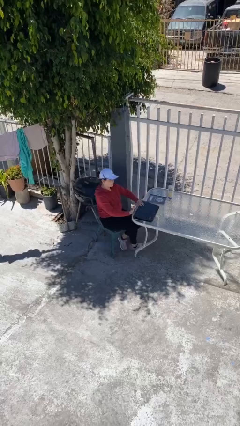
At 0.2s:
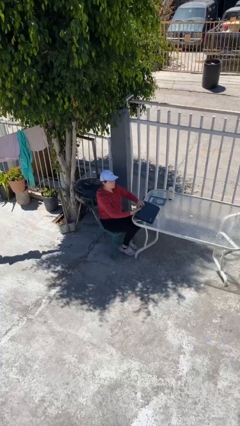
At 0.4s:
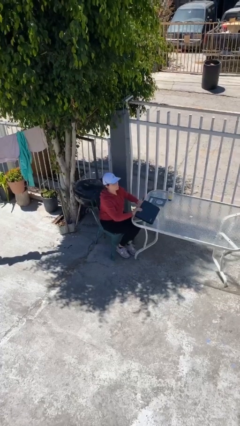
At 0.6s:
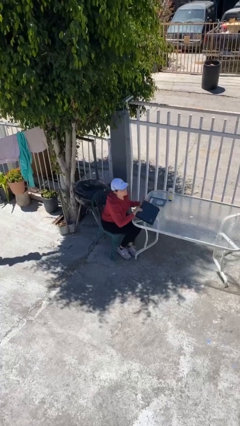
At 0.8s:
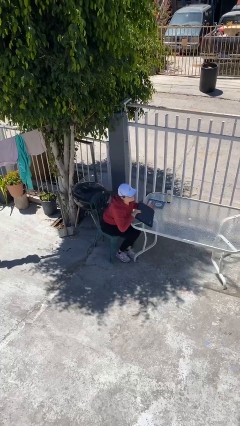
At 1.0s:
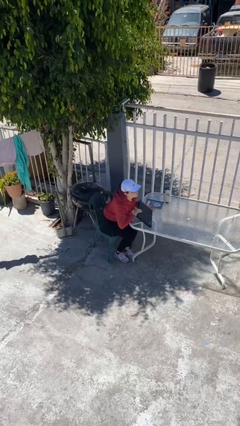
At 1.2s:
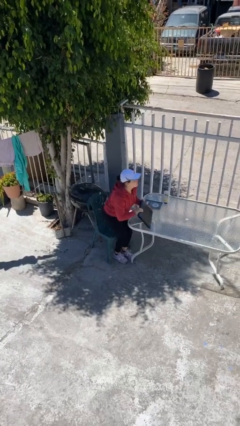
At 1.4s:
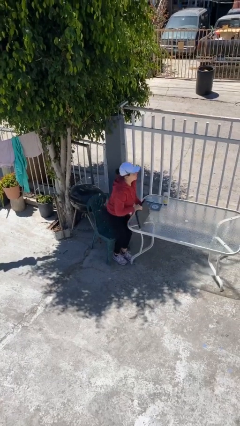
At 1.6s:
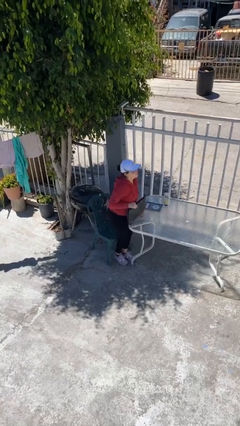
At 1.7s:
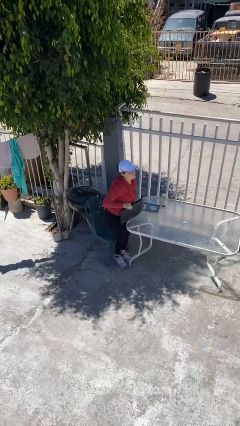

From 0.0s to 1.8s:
person stands up

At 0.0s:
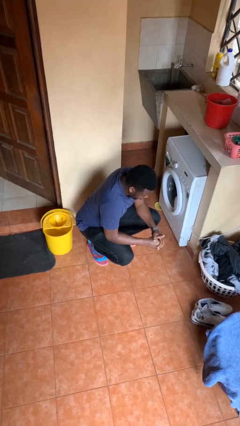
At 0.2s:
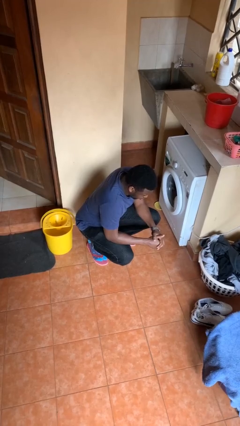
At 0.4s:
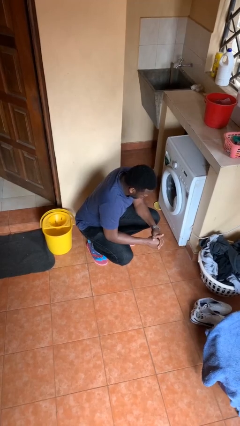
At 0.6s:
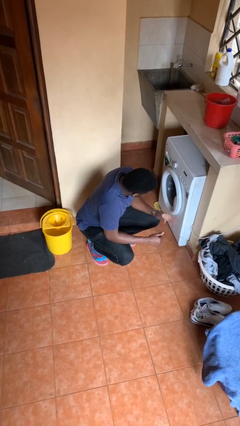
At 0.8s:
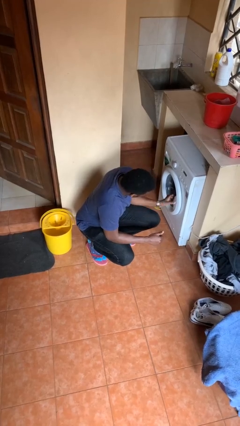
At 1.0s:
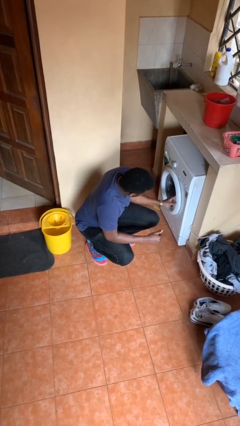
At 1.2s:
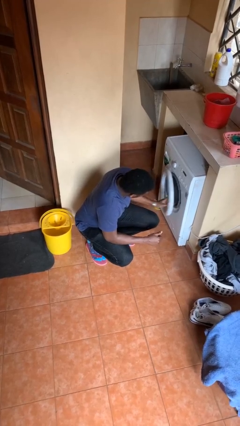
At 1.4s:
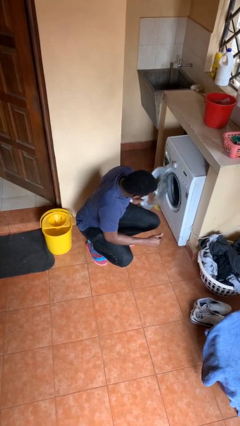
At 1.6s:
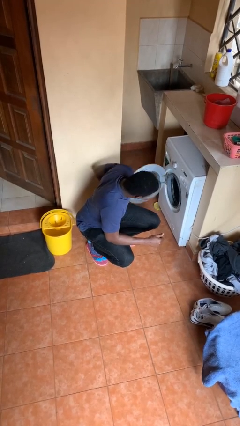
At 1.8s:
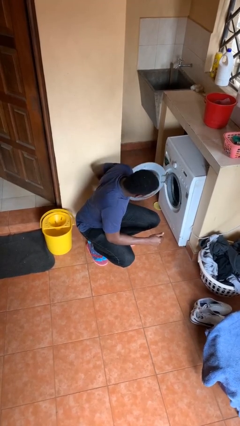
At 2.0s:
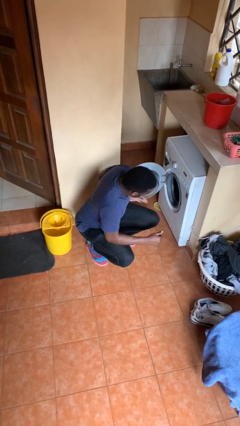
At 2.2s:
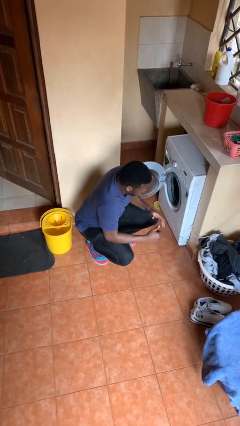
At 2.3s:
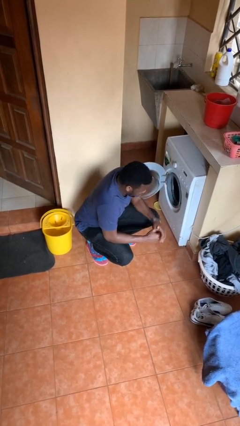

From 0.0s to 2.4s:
person opens clothes washer

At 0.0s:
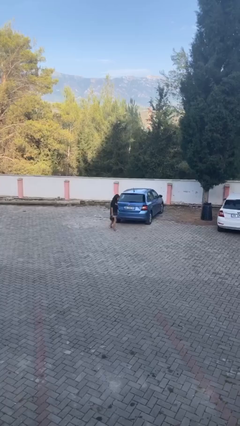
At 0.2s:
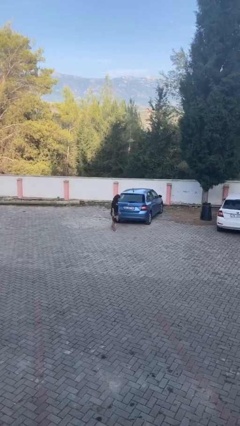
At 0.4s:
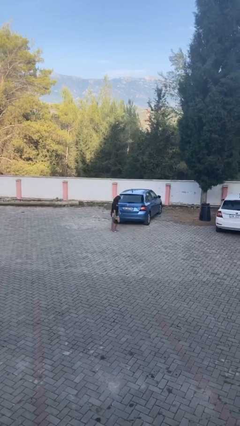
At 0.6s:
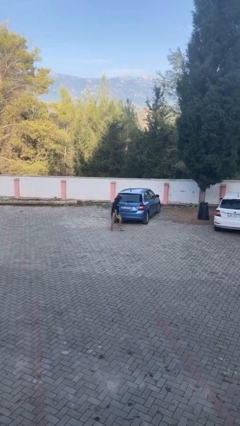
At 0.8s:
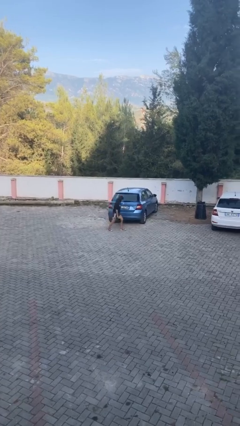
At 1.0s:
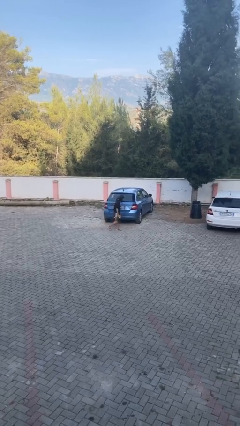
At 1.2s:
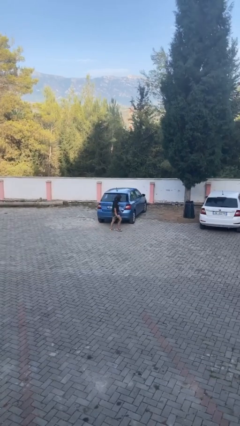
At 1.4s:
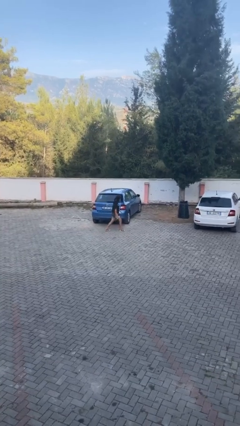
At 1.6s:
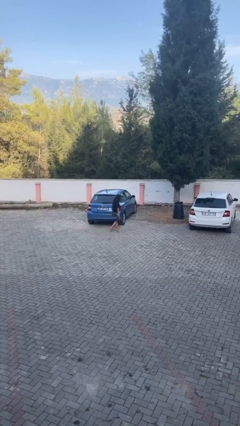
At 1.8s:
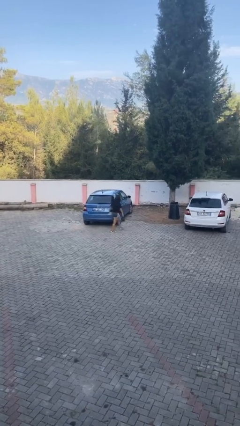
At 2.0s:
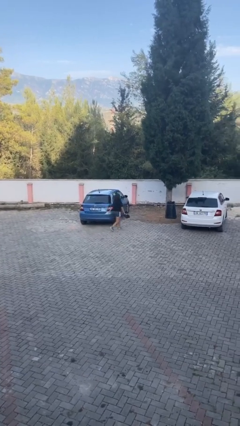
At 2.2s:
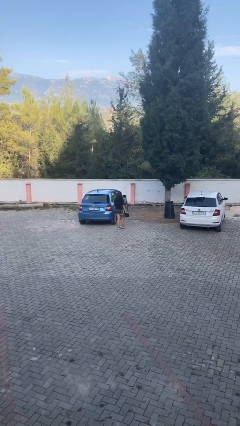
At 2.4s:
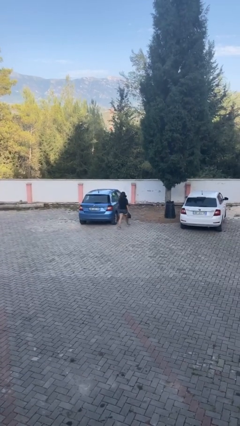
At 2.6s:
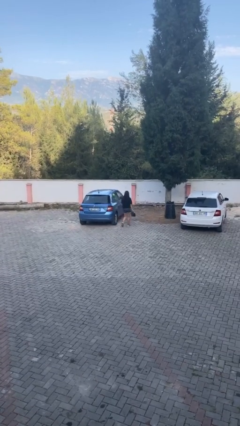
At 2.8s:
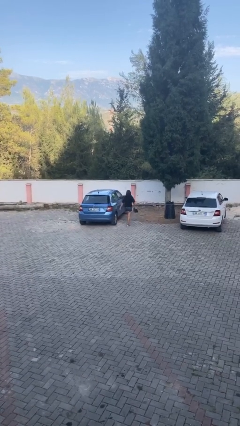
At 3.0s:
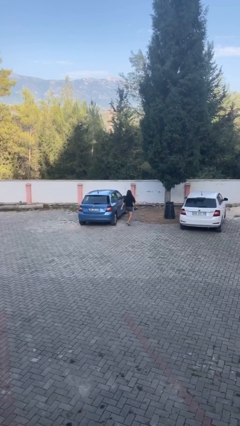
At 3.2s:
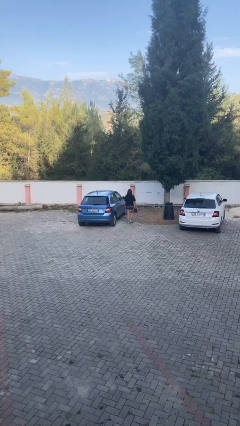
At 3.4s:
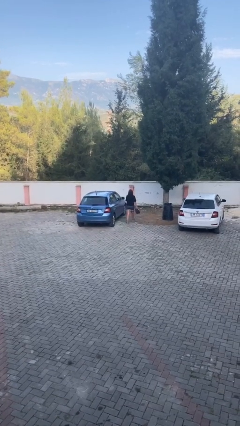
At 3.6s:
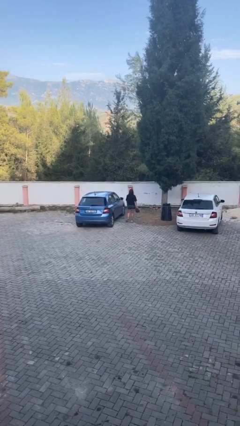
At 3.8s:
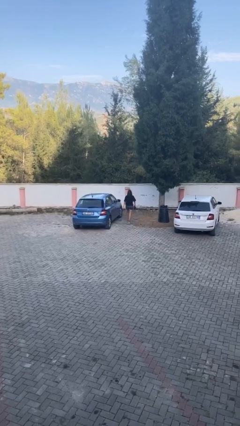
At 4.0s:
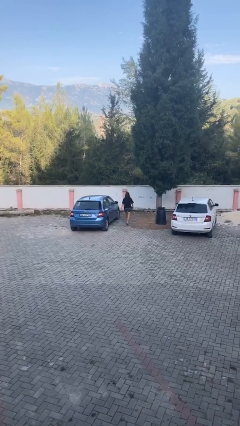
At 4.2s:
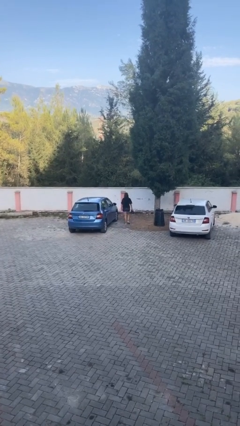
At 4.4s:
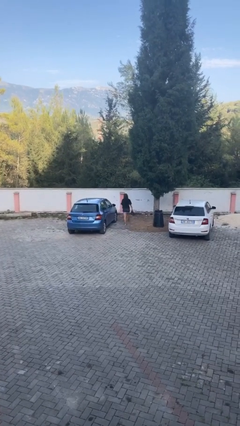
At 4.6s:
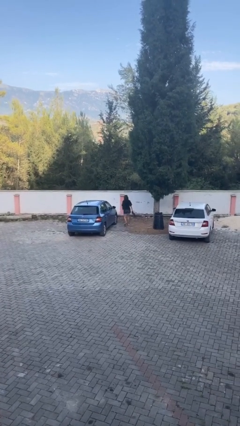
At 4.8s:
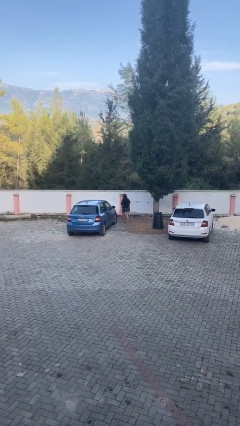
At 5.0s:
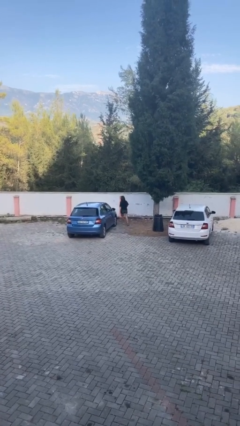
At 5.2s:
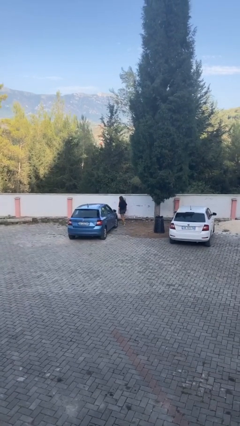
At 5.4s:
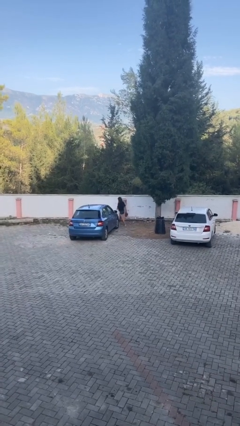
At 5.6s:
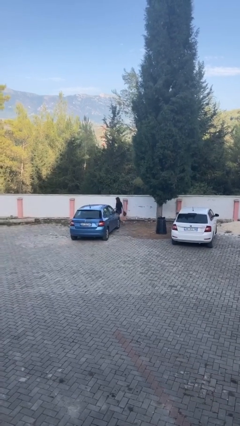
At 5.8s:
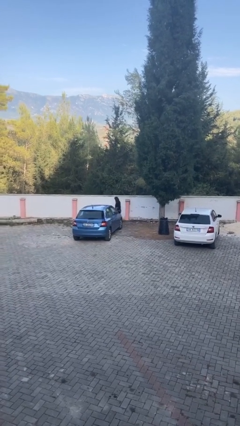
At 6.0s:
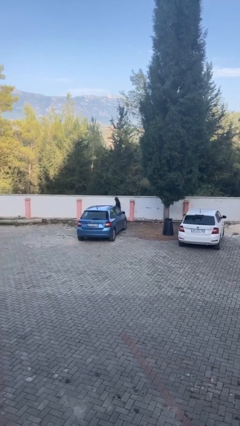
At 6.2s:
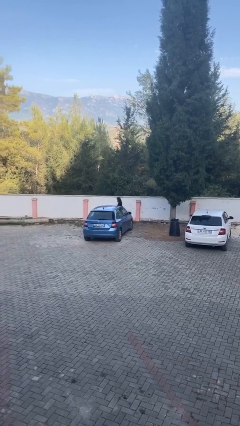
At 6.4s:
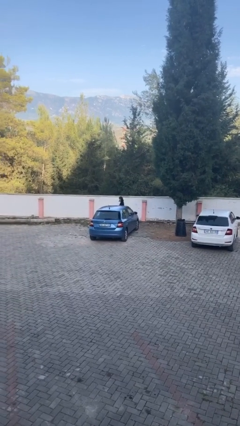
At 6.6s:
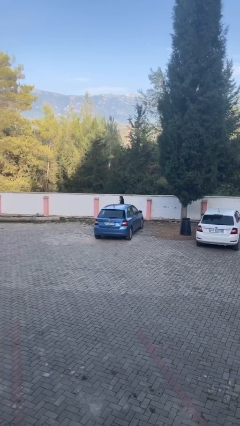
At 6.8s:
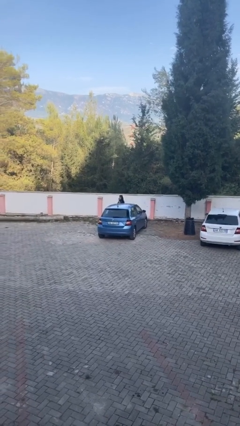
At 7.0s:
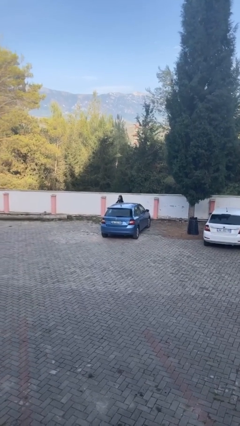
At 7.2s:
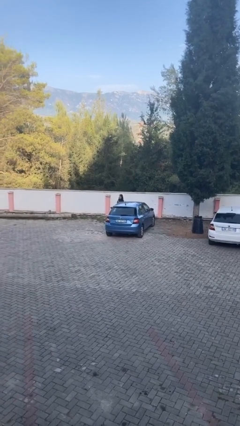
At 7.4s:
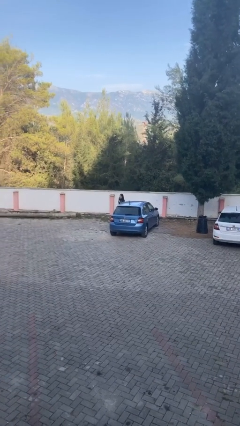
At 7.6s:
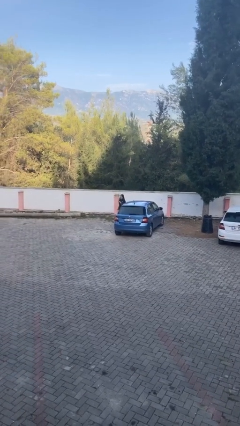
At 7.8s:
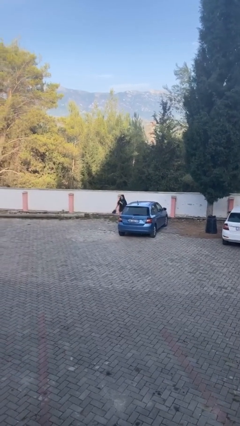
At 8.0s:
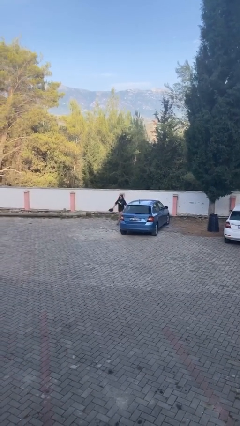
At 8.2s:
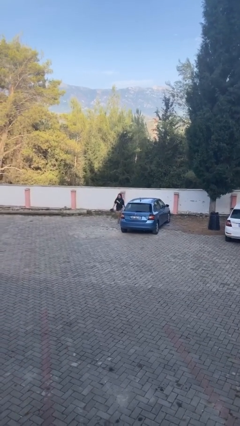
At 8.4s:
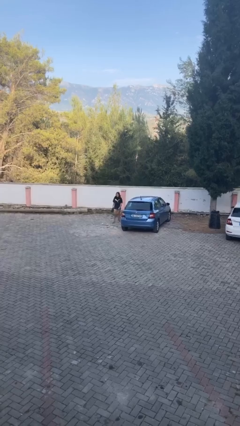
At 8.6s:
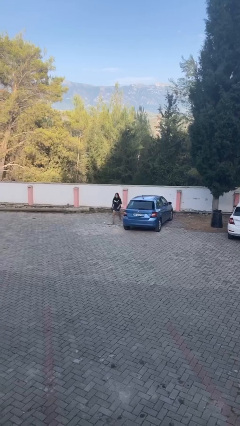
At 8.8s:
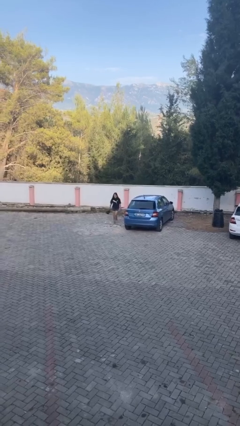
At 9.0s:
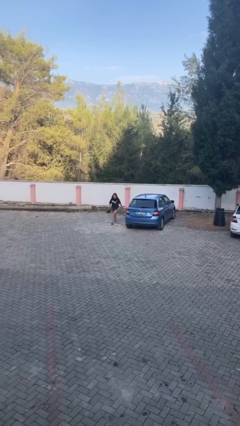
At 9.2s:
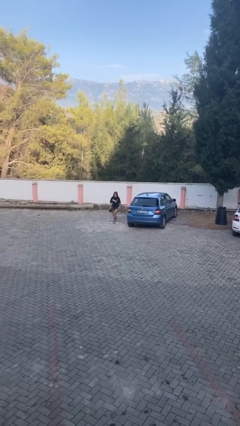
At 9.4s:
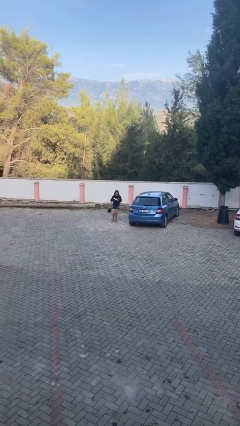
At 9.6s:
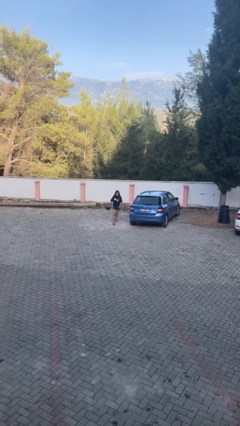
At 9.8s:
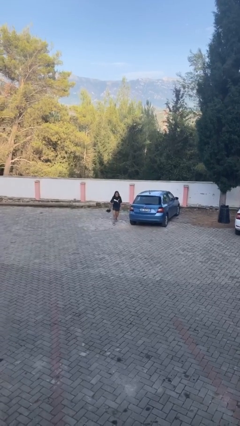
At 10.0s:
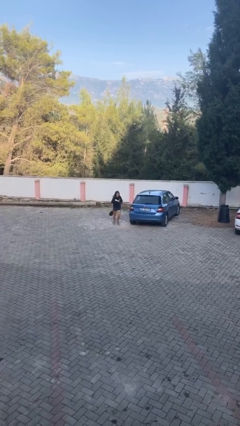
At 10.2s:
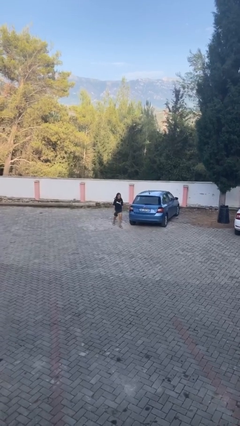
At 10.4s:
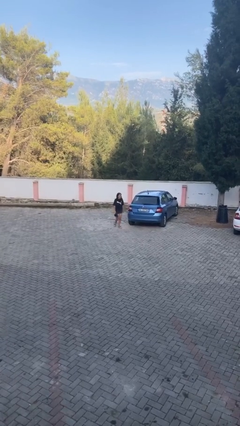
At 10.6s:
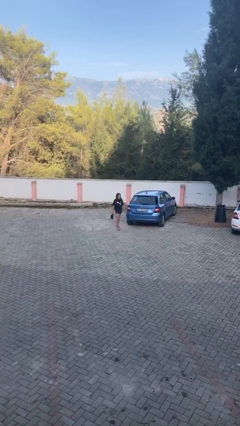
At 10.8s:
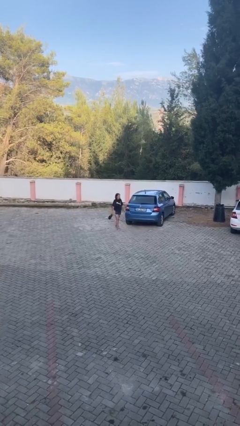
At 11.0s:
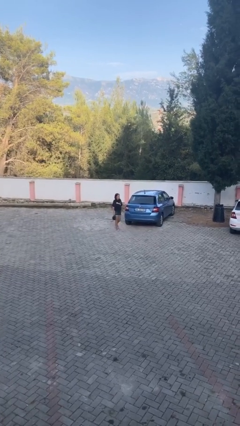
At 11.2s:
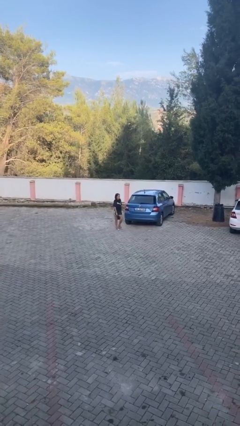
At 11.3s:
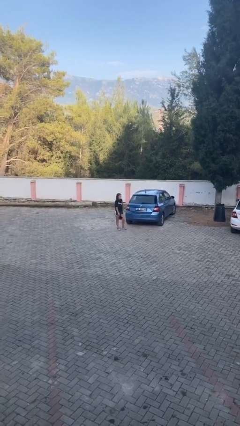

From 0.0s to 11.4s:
person walks around car

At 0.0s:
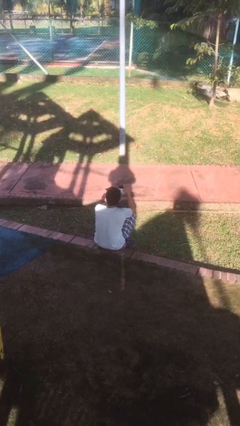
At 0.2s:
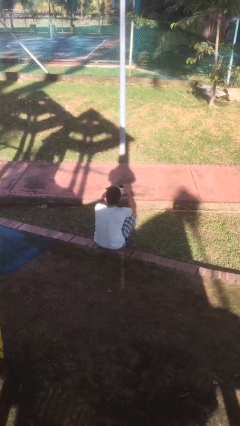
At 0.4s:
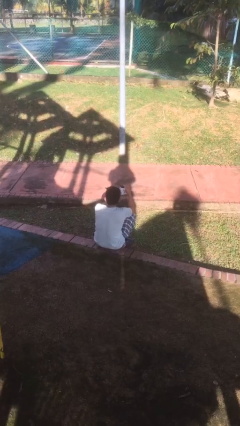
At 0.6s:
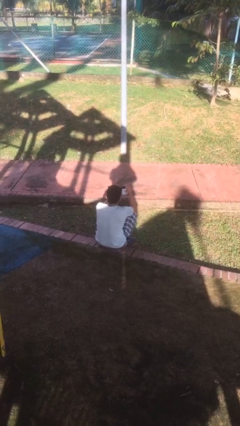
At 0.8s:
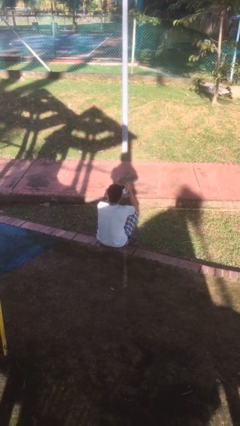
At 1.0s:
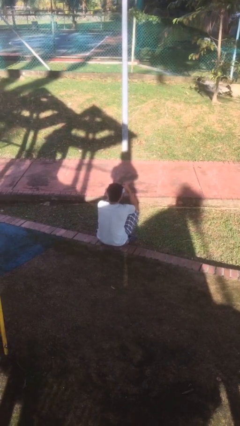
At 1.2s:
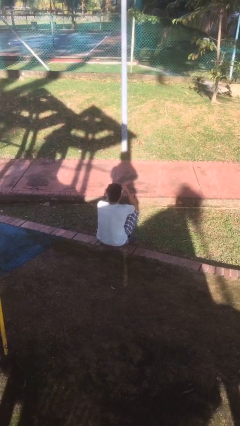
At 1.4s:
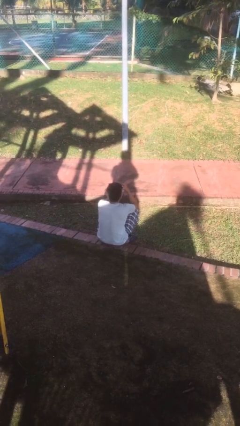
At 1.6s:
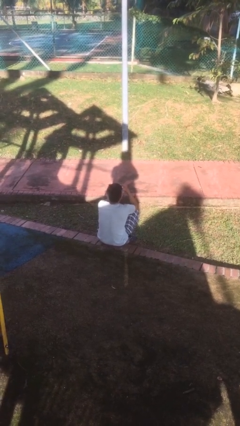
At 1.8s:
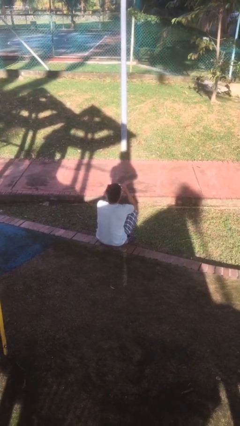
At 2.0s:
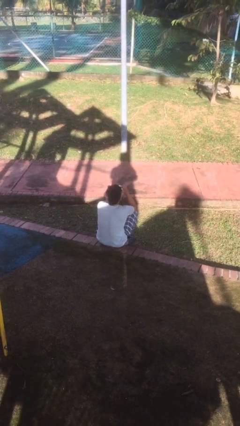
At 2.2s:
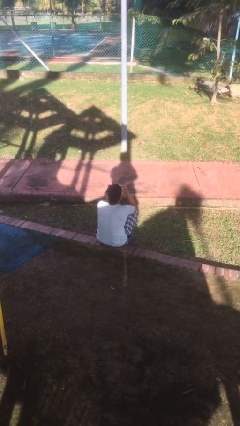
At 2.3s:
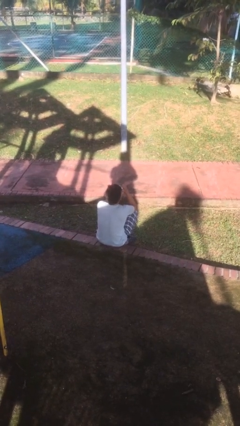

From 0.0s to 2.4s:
person drinks from mug

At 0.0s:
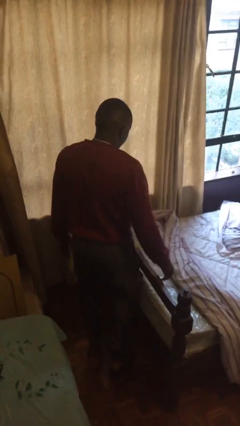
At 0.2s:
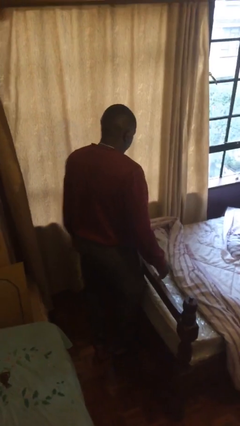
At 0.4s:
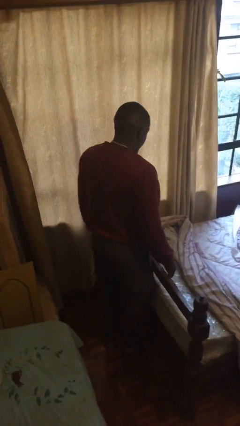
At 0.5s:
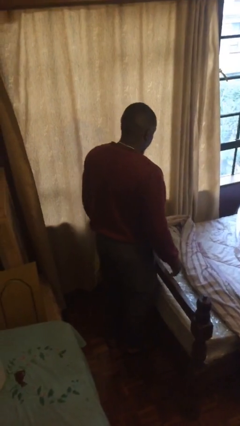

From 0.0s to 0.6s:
person makes bed
